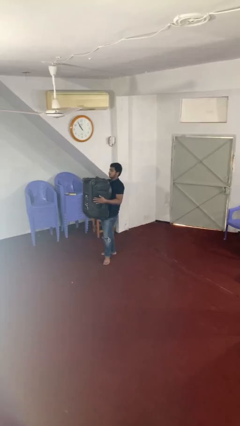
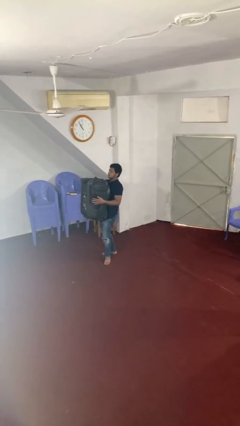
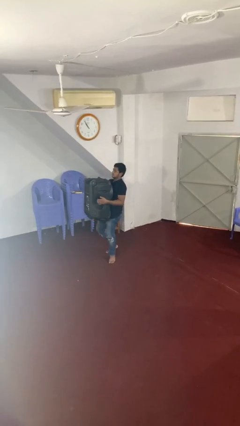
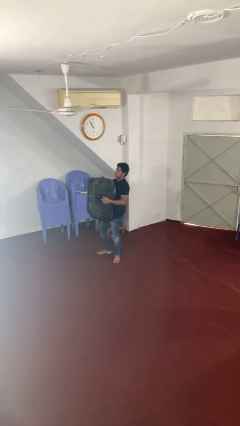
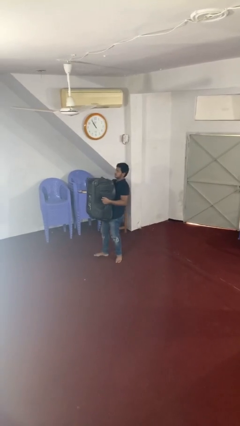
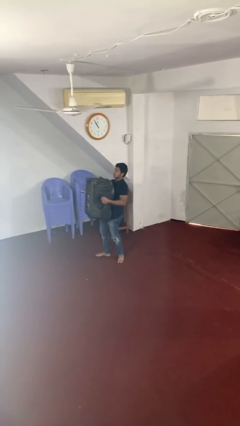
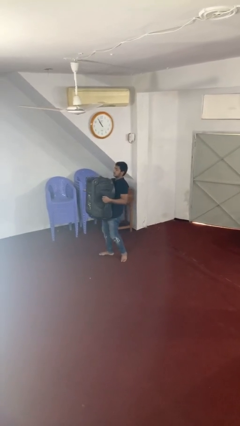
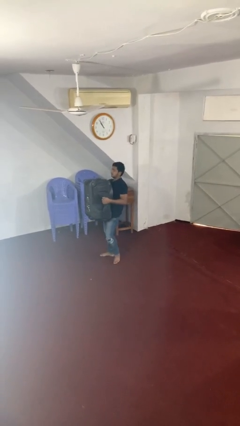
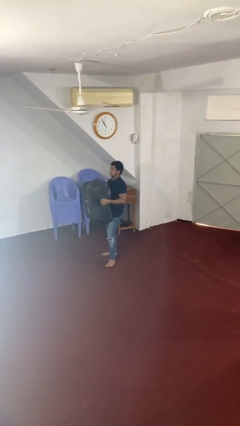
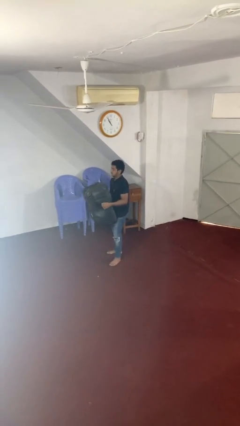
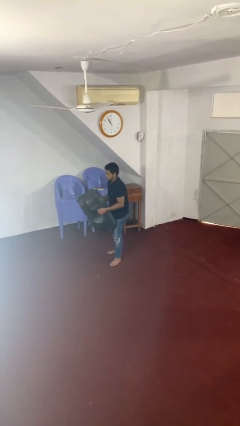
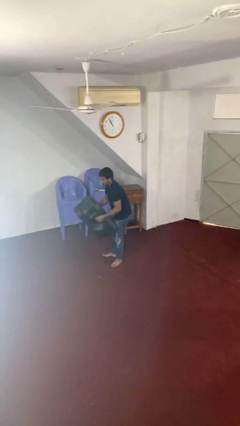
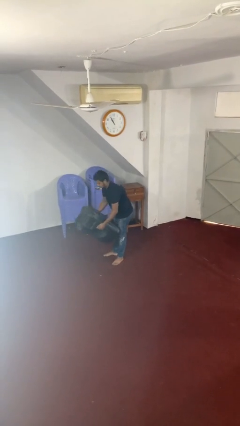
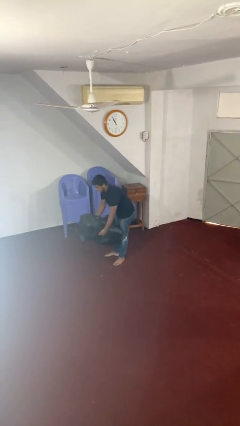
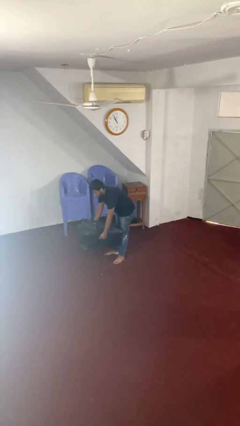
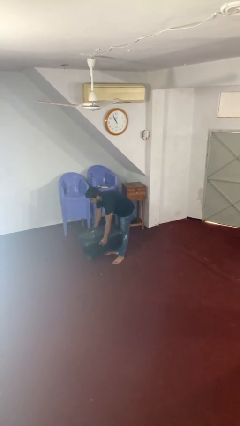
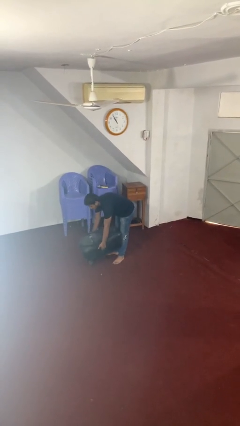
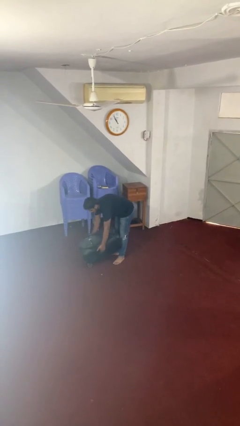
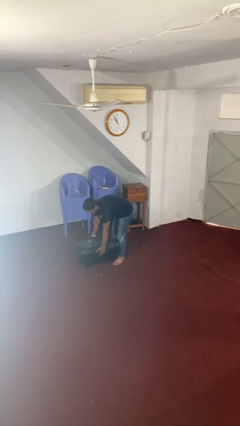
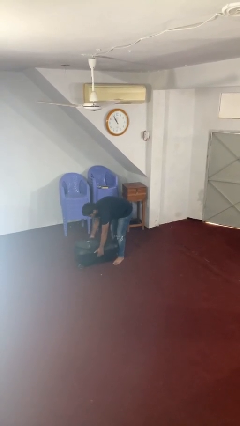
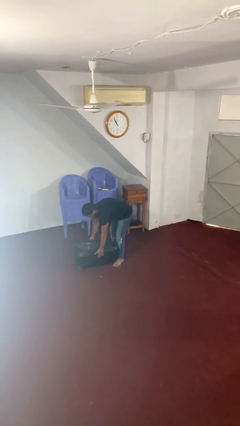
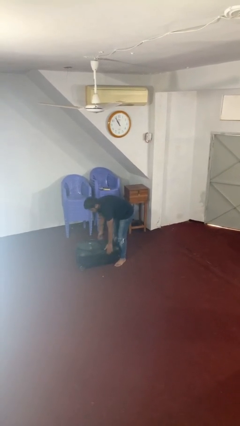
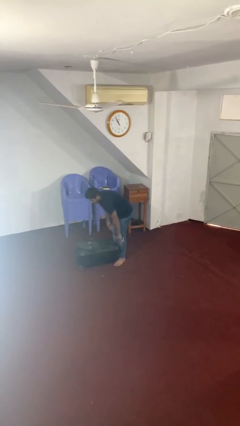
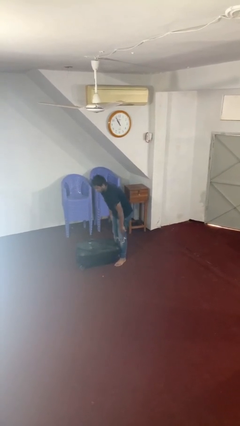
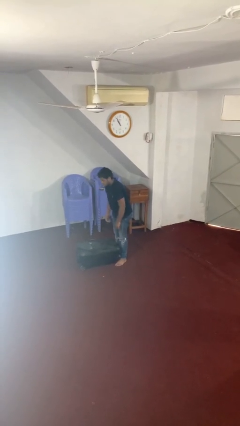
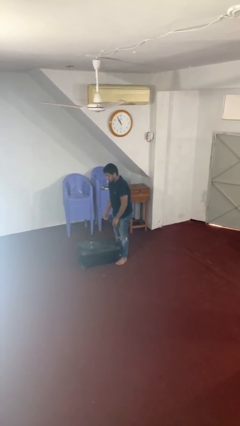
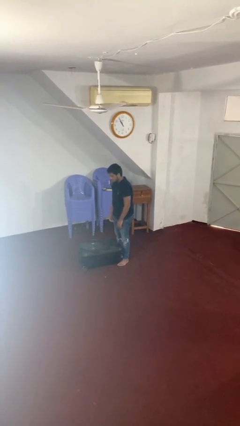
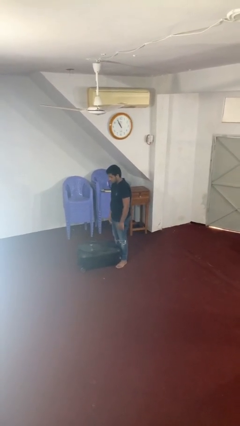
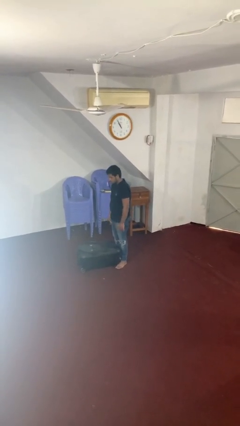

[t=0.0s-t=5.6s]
person puts down object on floor

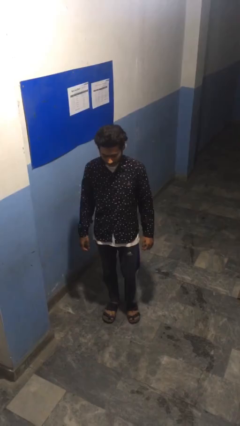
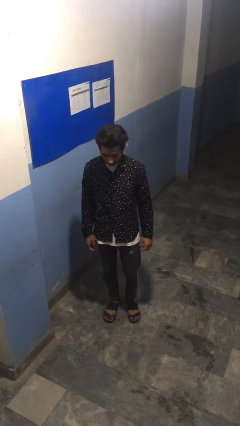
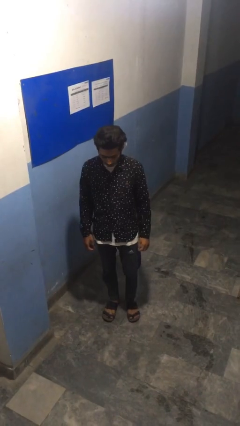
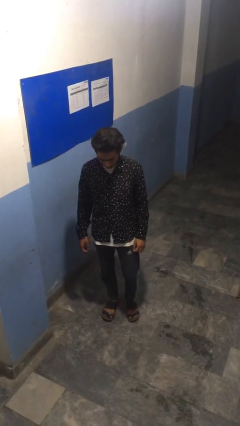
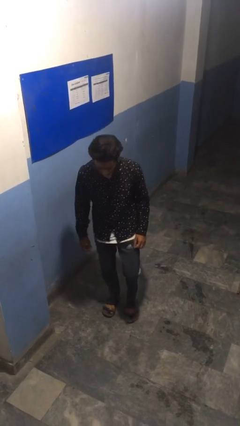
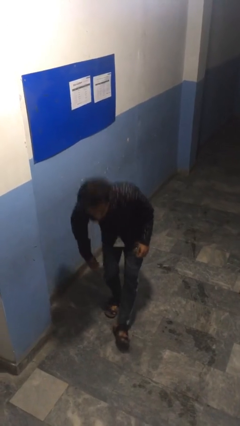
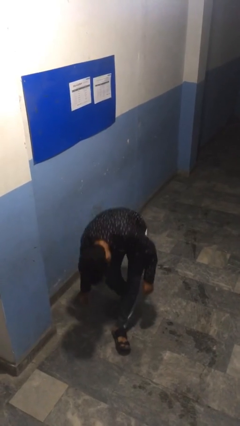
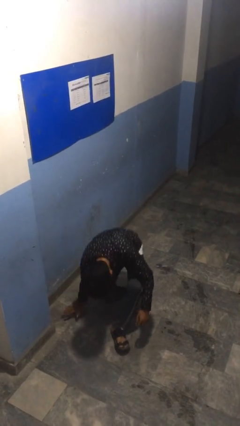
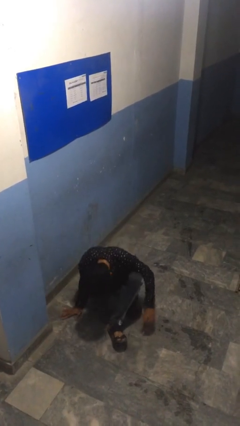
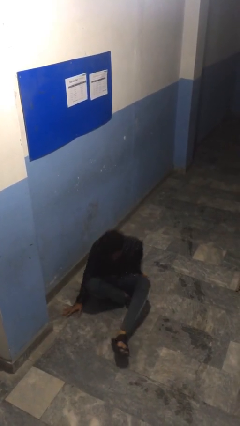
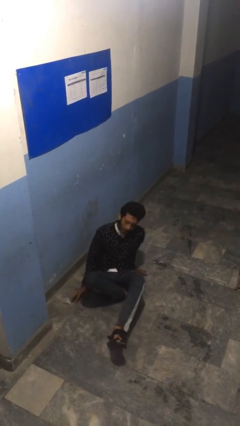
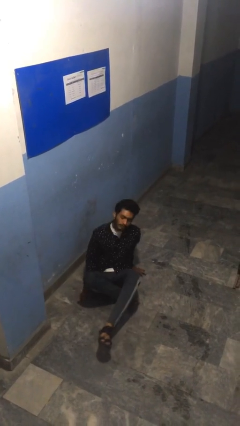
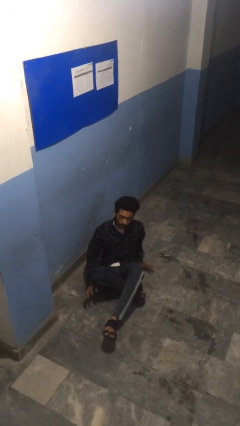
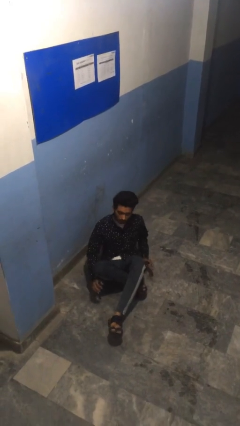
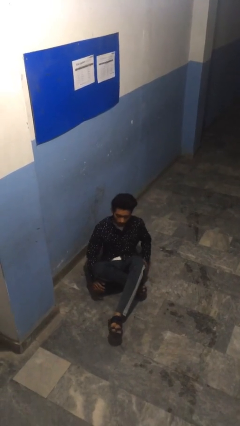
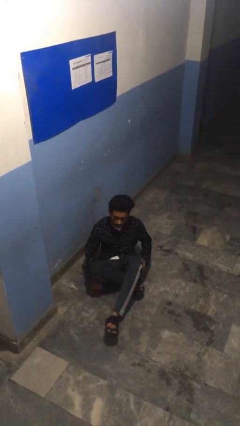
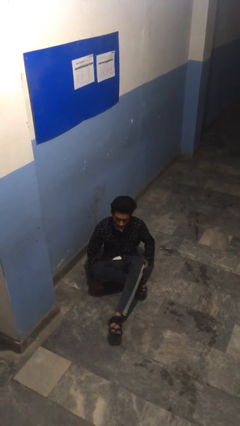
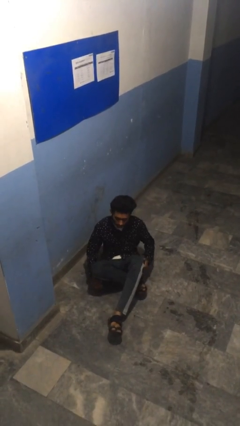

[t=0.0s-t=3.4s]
person falls while standing

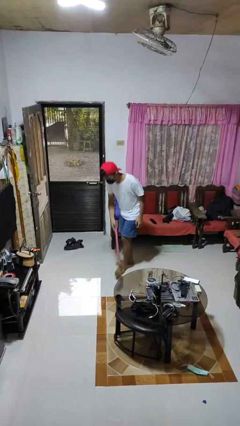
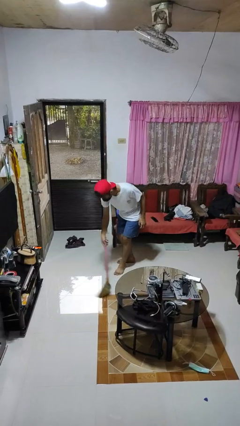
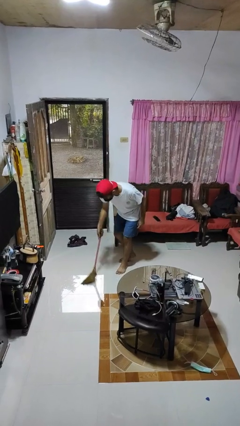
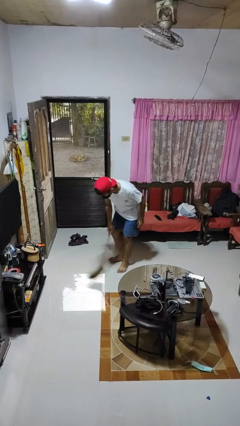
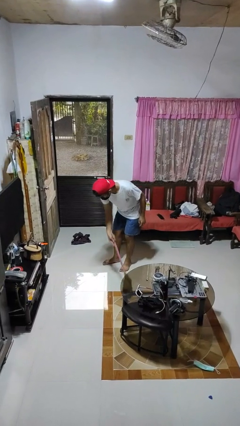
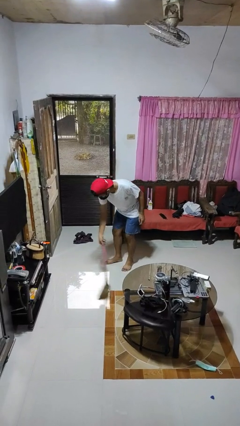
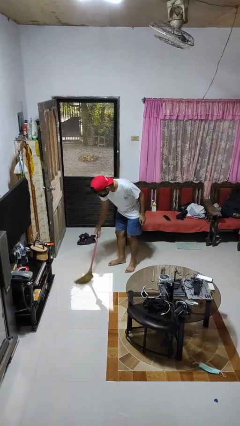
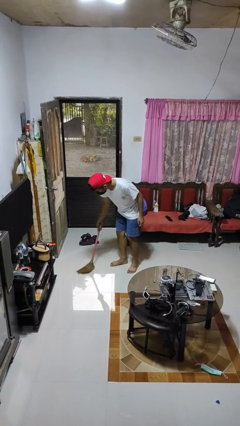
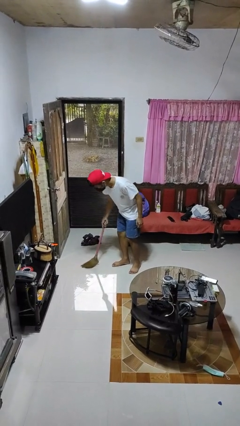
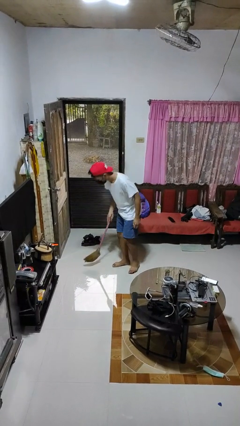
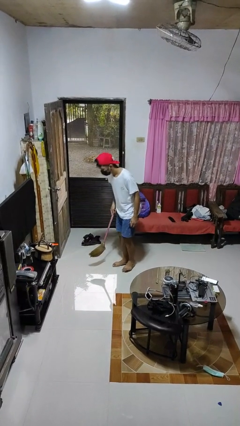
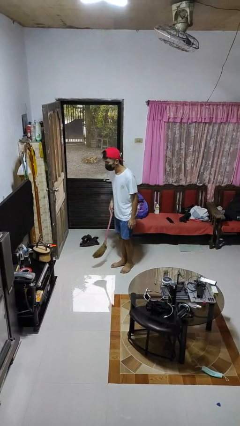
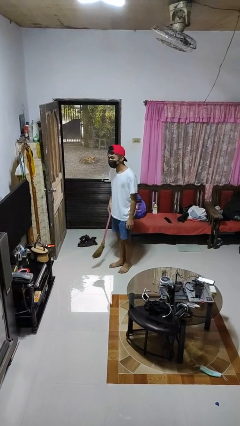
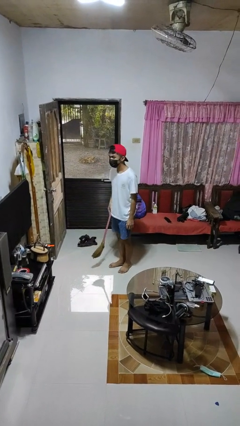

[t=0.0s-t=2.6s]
person sweeps floor

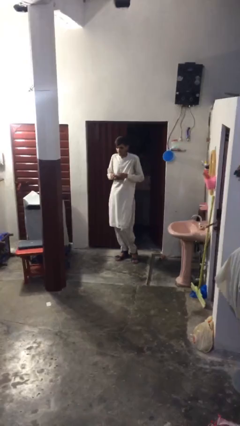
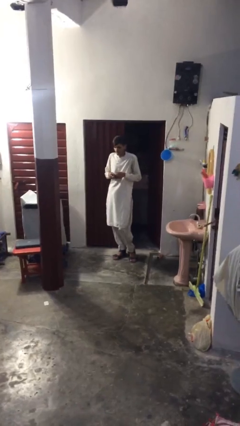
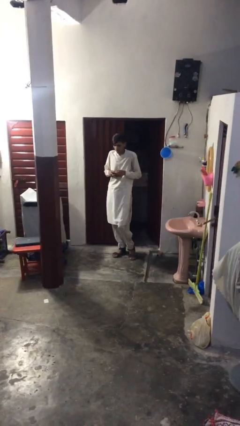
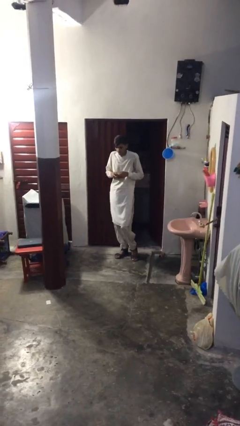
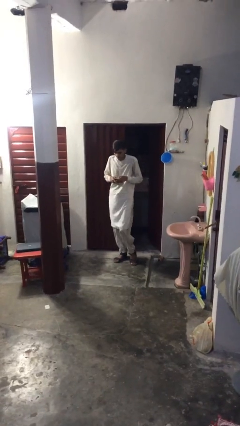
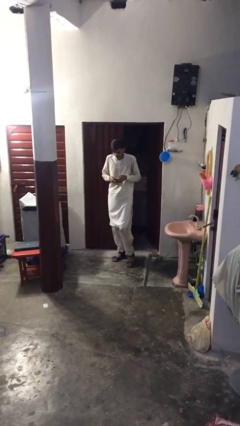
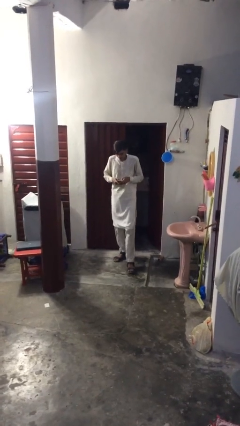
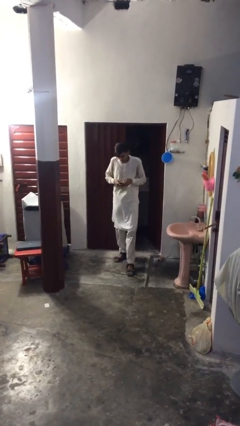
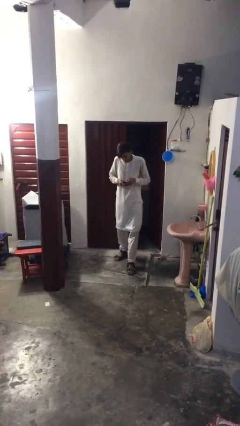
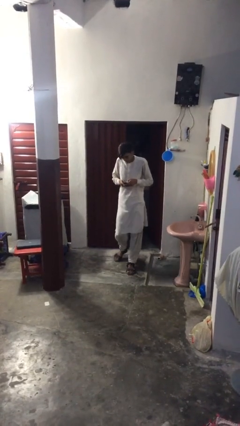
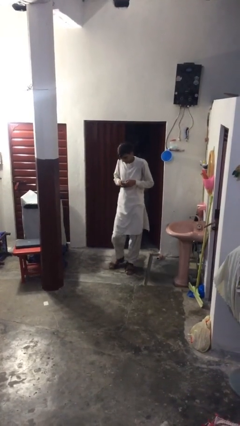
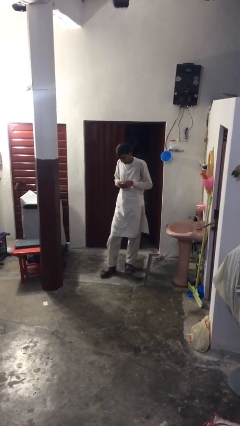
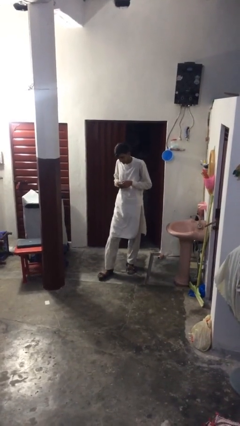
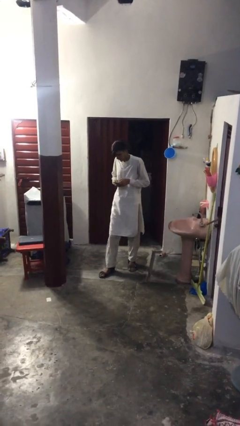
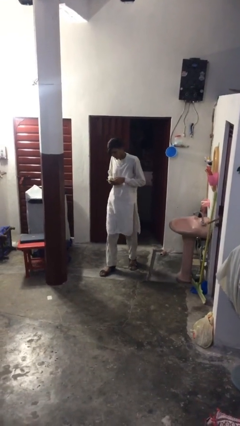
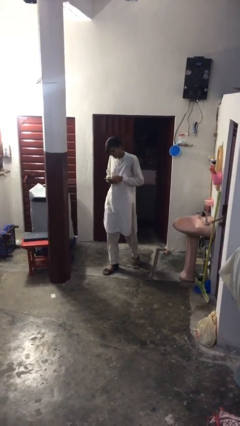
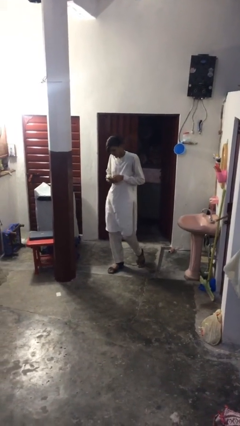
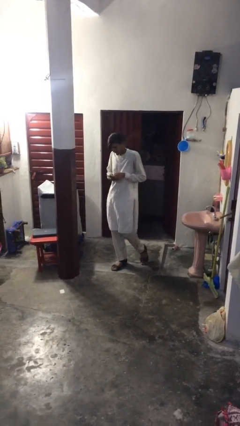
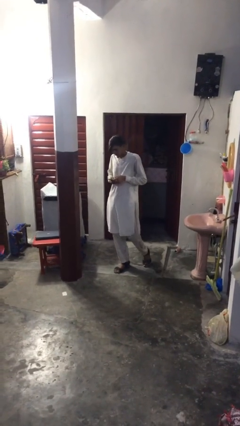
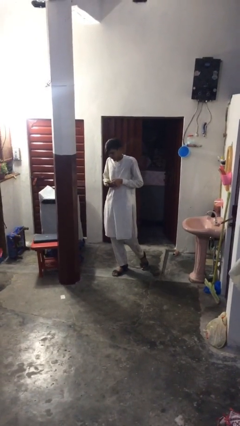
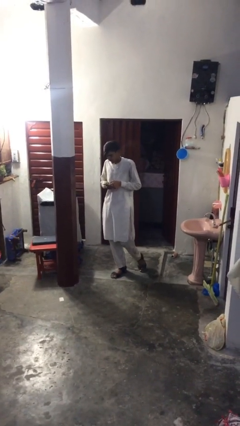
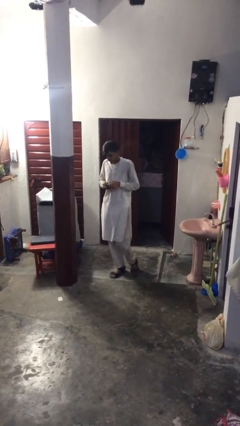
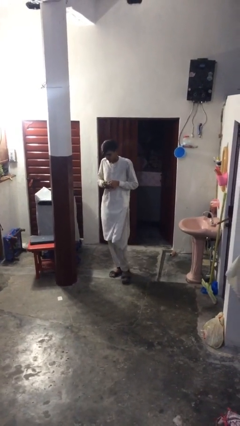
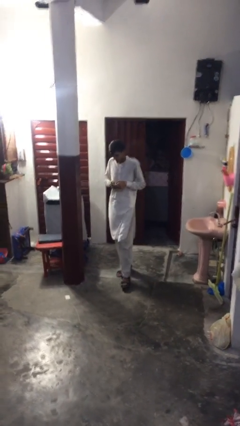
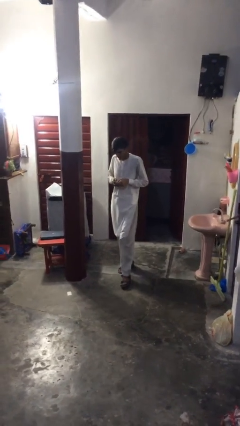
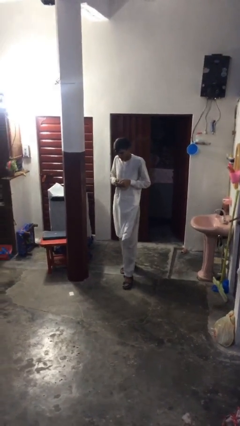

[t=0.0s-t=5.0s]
person texts on phone

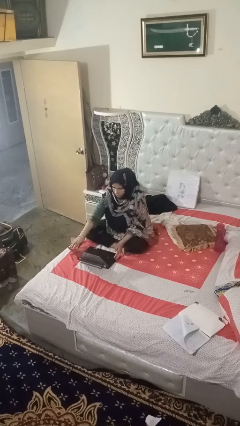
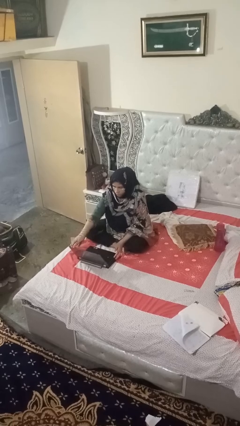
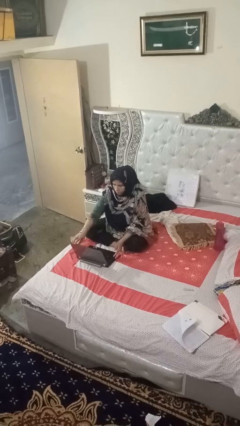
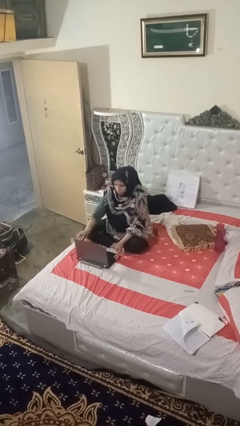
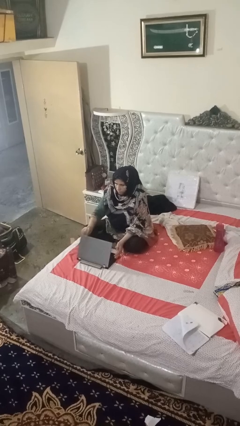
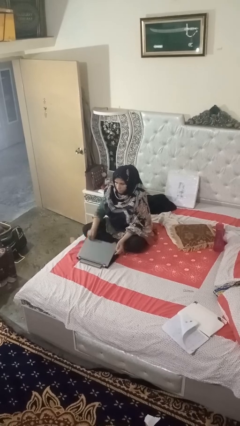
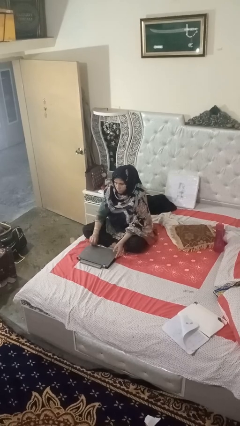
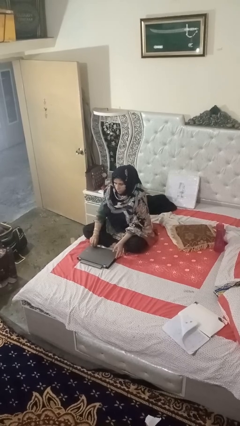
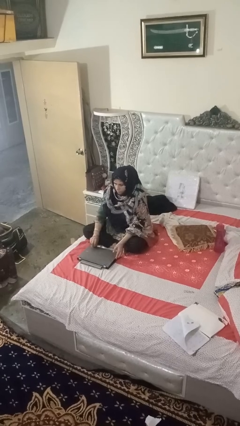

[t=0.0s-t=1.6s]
person closes laptop
